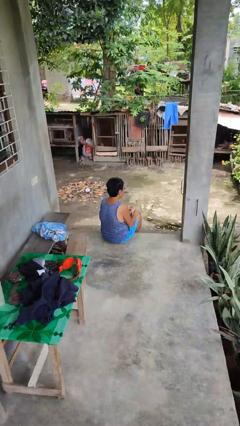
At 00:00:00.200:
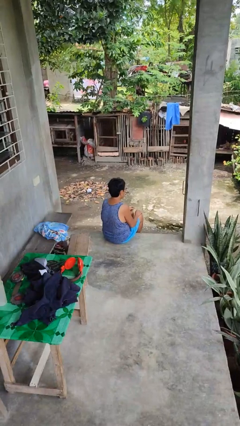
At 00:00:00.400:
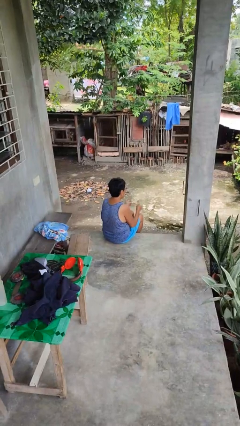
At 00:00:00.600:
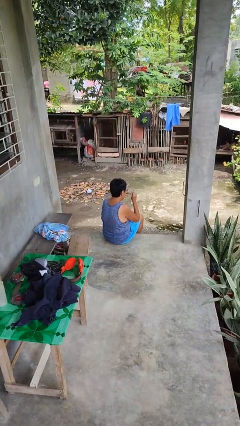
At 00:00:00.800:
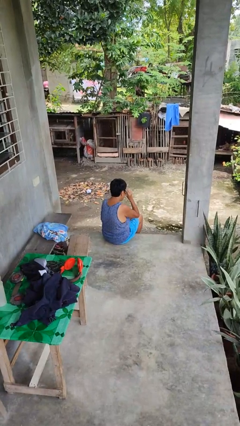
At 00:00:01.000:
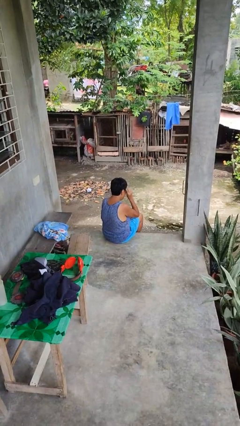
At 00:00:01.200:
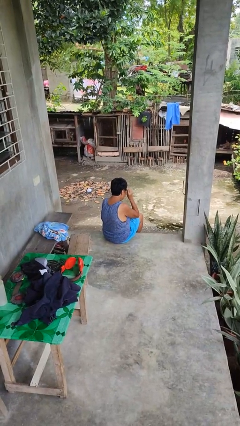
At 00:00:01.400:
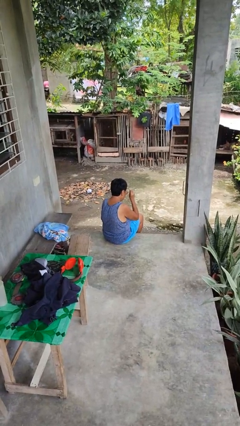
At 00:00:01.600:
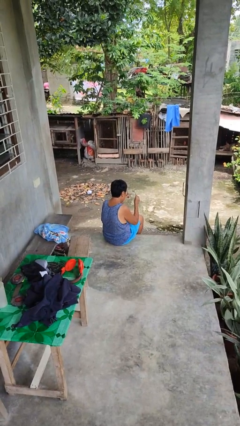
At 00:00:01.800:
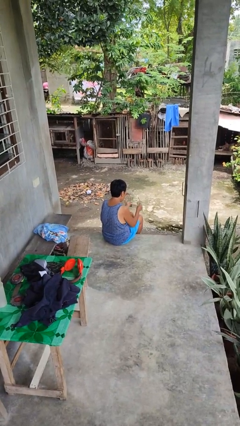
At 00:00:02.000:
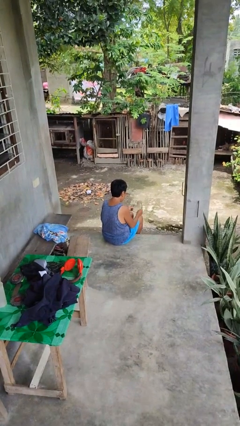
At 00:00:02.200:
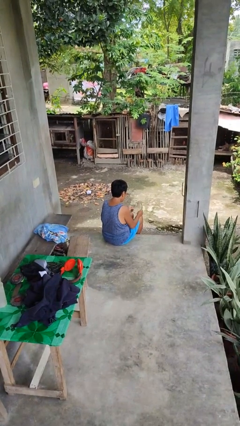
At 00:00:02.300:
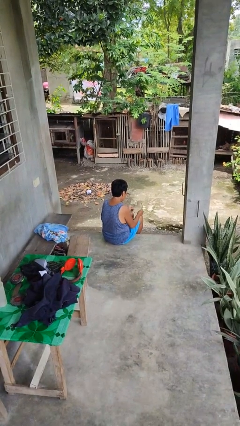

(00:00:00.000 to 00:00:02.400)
person takes off glasses

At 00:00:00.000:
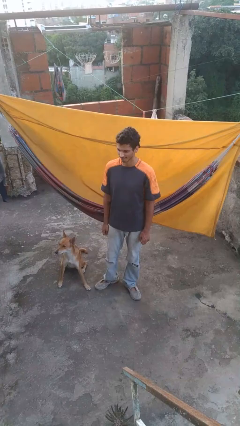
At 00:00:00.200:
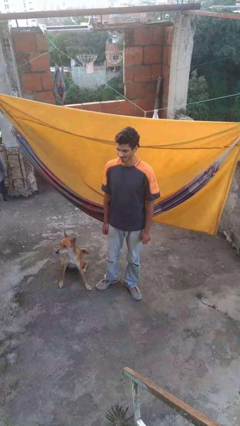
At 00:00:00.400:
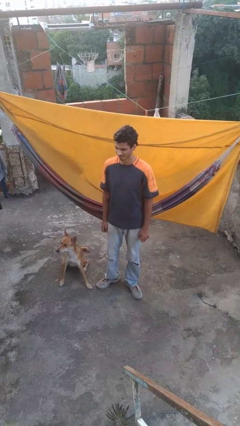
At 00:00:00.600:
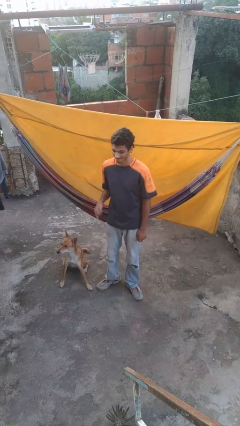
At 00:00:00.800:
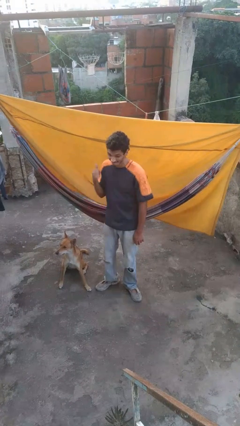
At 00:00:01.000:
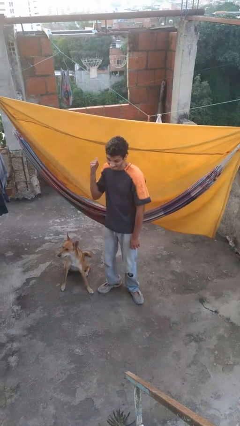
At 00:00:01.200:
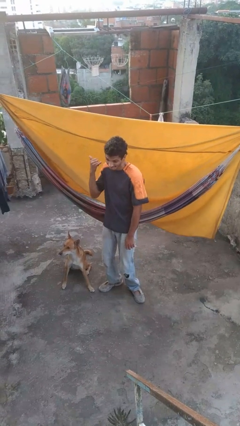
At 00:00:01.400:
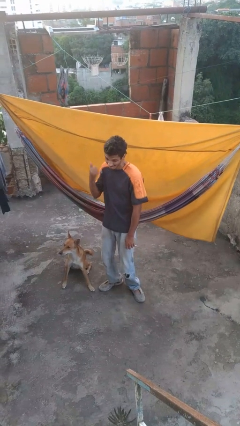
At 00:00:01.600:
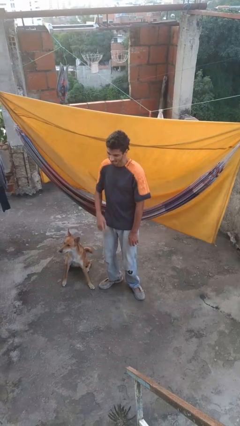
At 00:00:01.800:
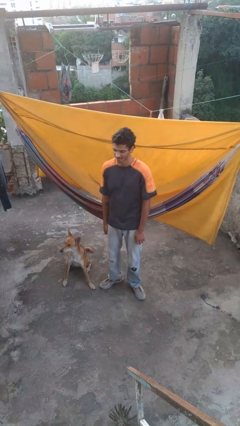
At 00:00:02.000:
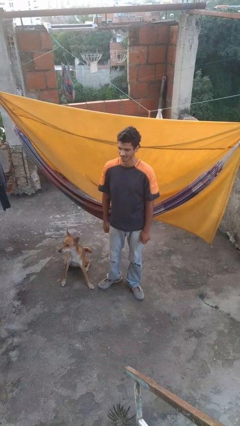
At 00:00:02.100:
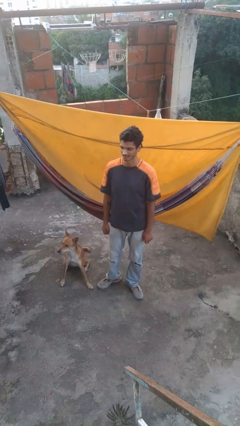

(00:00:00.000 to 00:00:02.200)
person gestures hang loose

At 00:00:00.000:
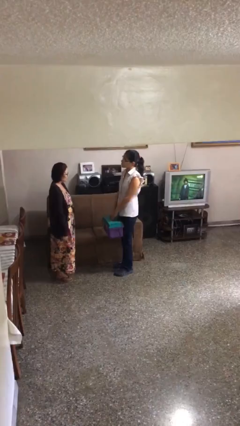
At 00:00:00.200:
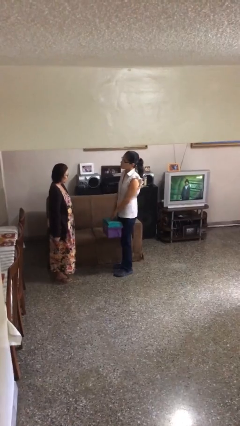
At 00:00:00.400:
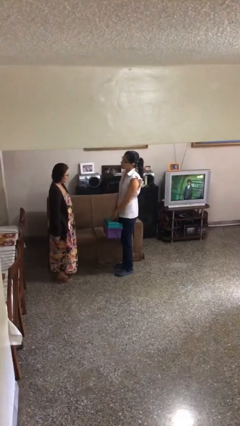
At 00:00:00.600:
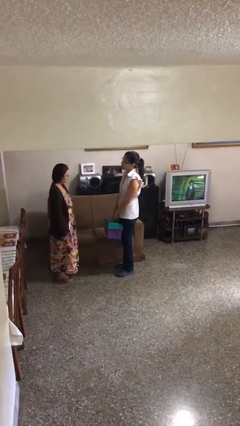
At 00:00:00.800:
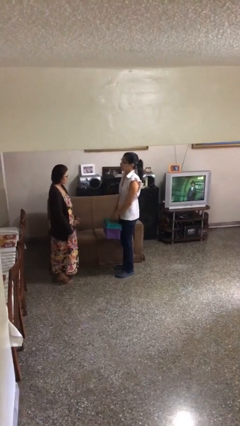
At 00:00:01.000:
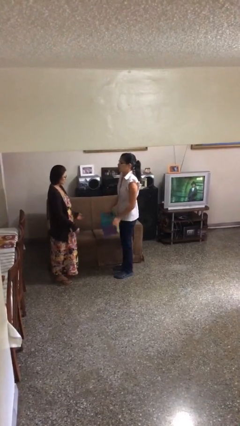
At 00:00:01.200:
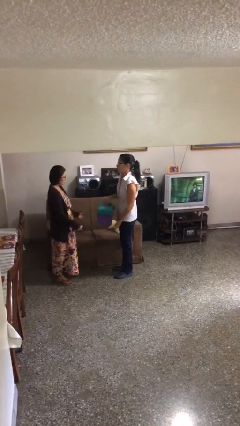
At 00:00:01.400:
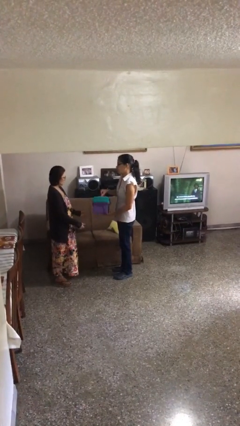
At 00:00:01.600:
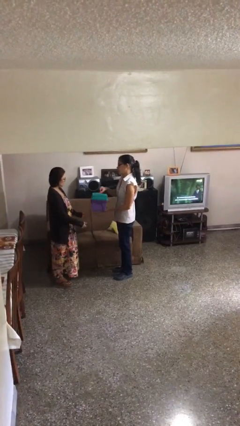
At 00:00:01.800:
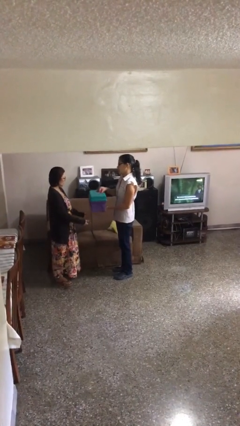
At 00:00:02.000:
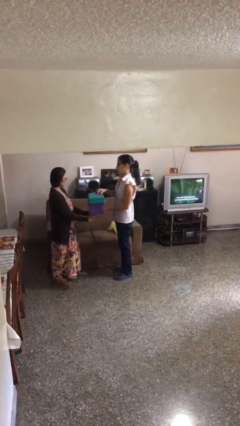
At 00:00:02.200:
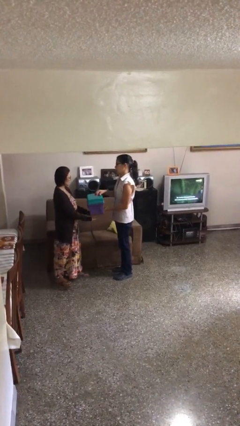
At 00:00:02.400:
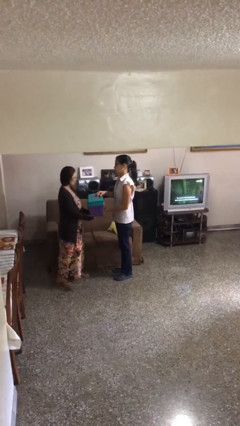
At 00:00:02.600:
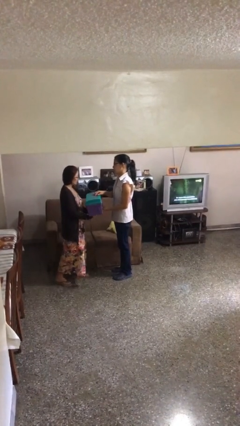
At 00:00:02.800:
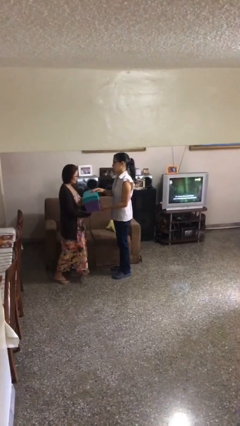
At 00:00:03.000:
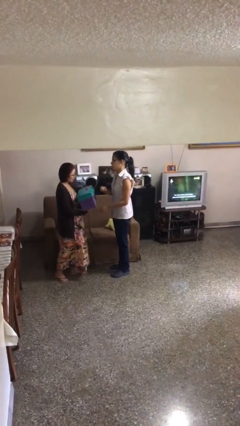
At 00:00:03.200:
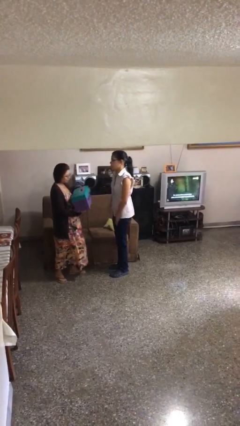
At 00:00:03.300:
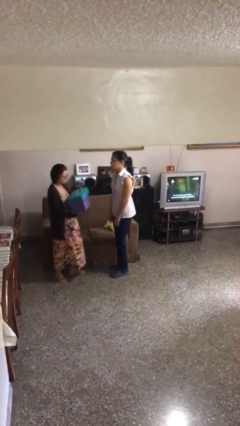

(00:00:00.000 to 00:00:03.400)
person transfers object to person

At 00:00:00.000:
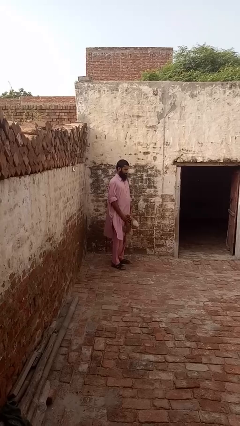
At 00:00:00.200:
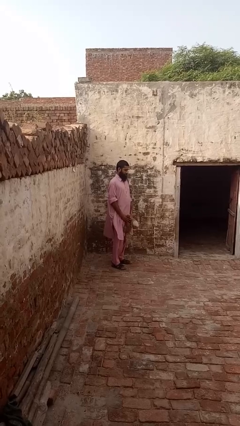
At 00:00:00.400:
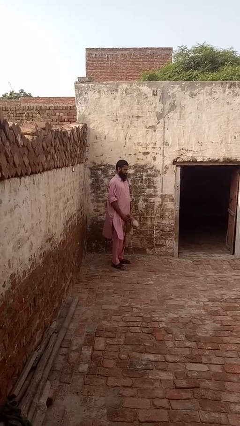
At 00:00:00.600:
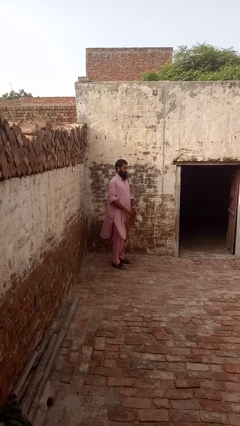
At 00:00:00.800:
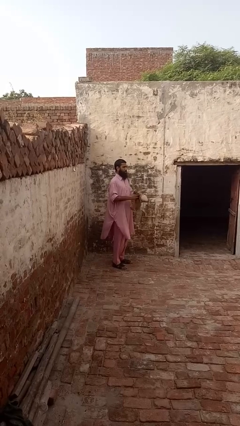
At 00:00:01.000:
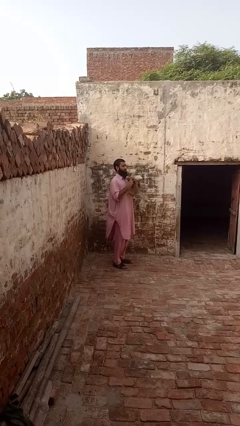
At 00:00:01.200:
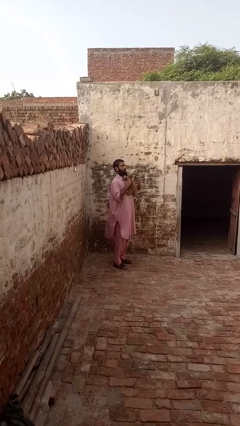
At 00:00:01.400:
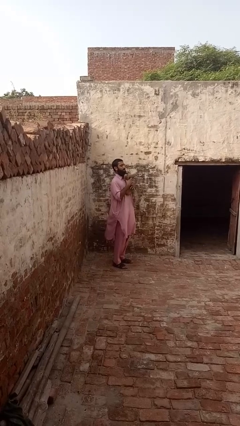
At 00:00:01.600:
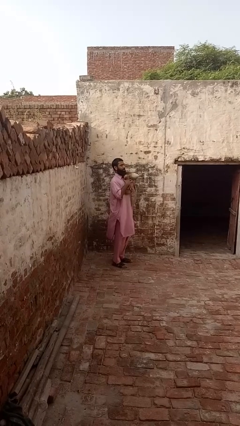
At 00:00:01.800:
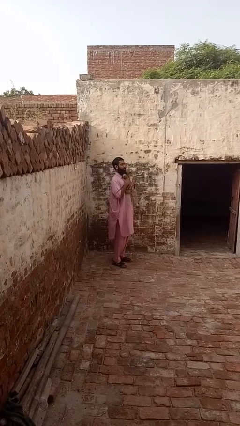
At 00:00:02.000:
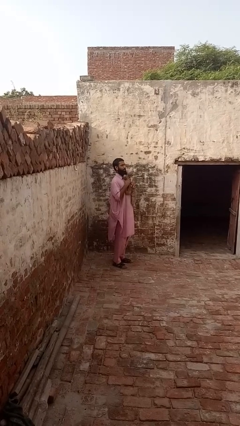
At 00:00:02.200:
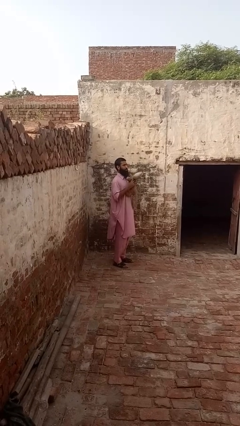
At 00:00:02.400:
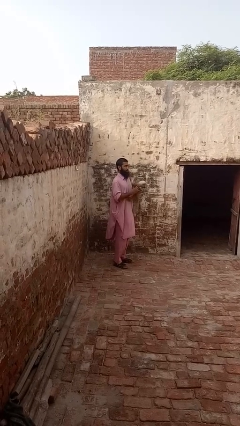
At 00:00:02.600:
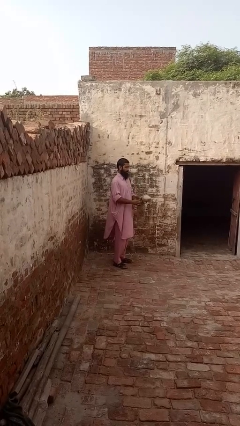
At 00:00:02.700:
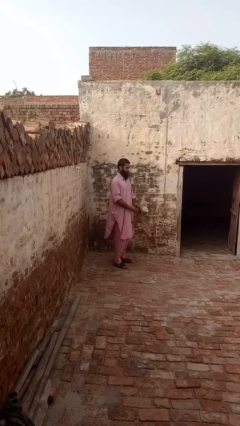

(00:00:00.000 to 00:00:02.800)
person hugs stuffed animal

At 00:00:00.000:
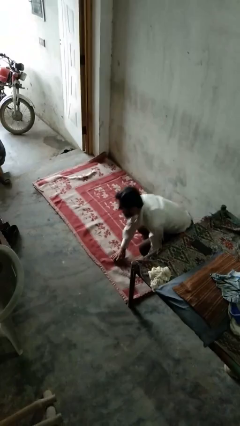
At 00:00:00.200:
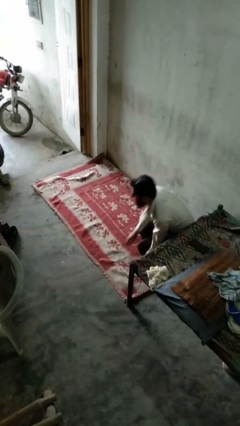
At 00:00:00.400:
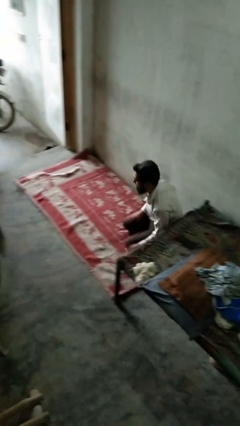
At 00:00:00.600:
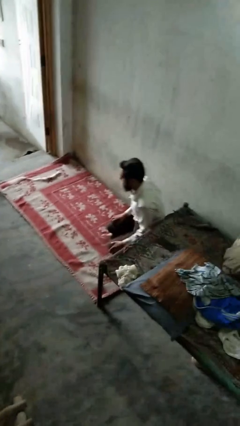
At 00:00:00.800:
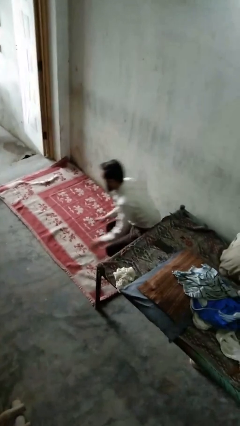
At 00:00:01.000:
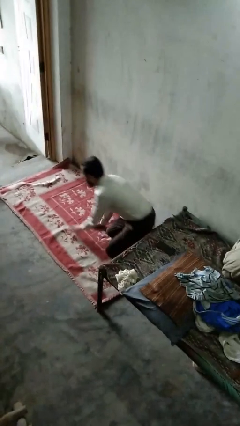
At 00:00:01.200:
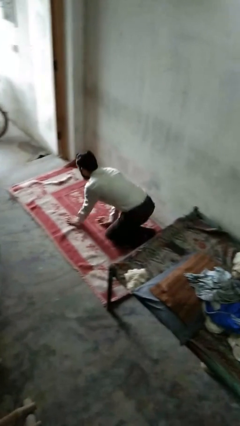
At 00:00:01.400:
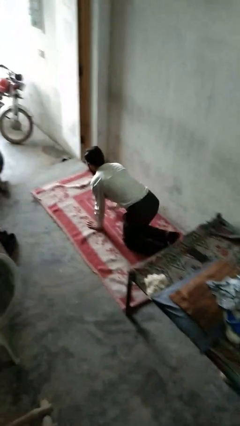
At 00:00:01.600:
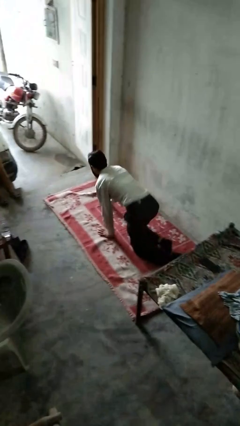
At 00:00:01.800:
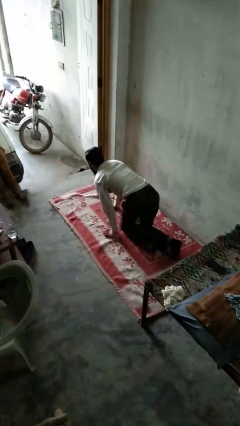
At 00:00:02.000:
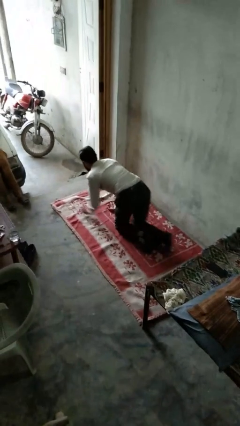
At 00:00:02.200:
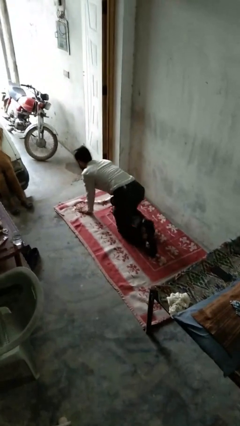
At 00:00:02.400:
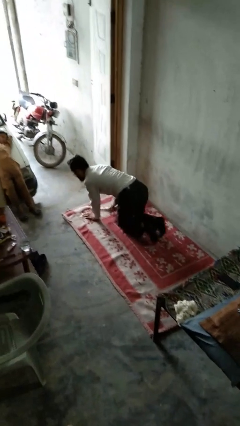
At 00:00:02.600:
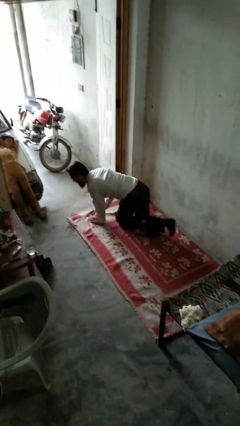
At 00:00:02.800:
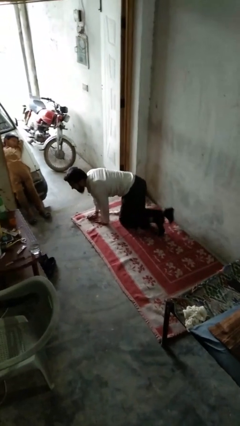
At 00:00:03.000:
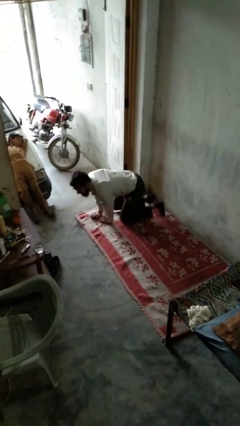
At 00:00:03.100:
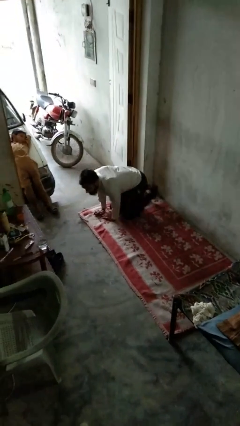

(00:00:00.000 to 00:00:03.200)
person crawls

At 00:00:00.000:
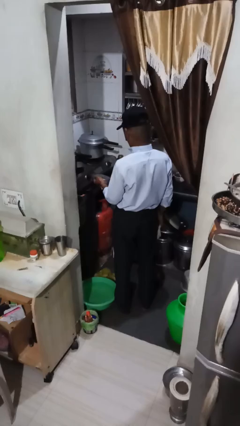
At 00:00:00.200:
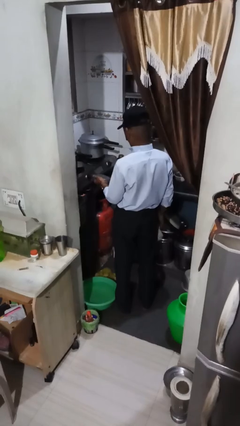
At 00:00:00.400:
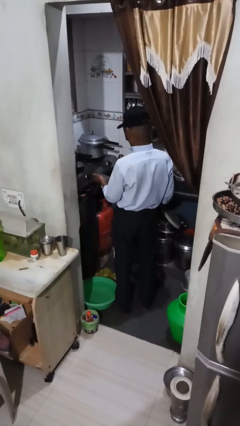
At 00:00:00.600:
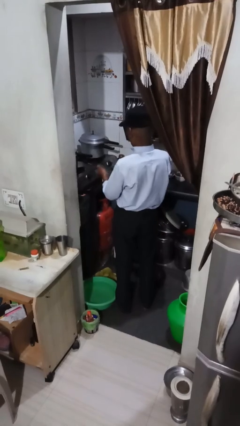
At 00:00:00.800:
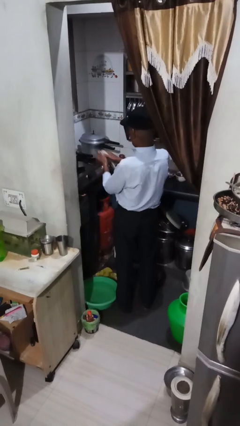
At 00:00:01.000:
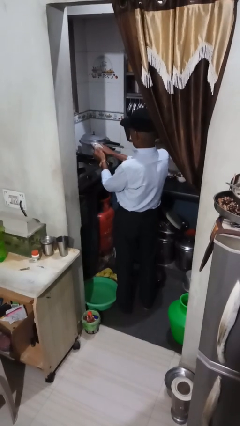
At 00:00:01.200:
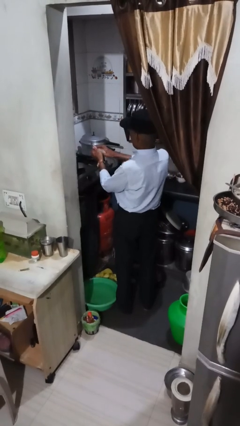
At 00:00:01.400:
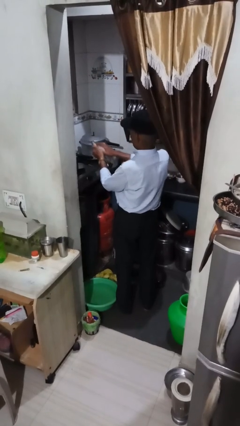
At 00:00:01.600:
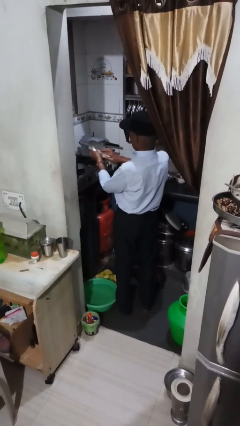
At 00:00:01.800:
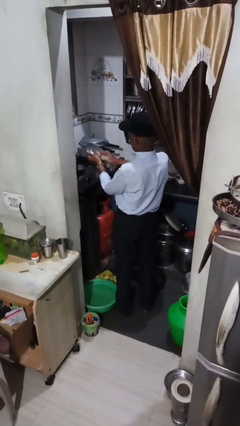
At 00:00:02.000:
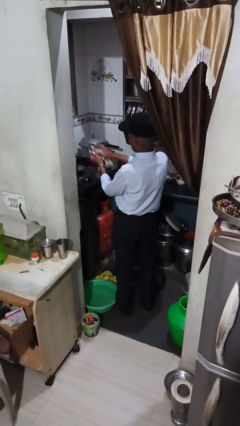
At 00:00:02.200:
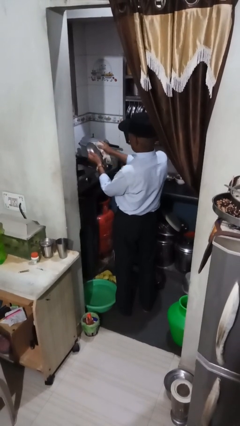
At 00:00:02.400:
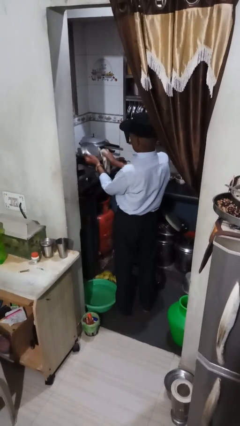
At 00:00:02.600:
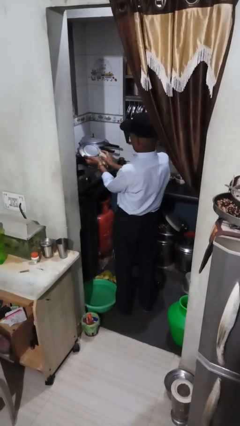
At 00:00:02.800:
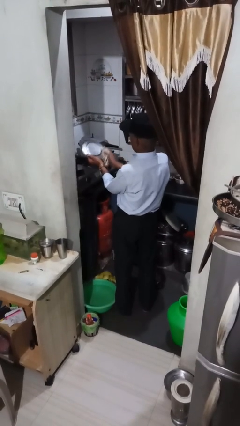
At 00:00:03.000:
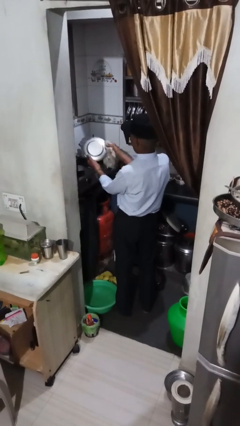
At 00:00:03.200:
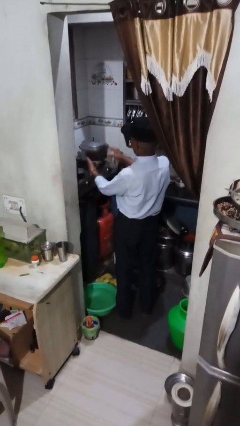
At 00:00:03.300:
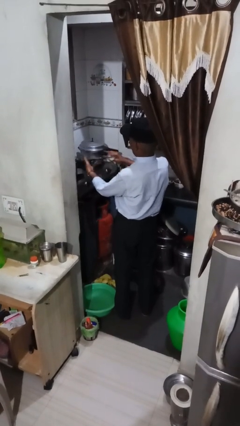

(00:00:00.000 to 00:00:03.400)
person dries dish
